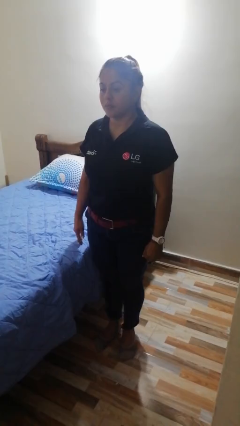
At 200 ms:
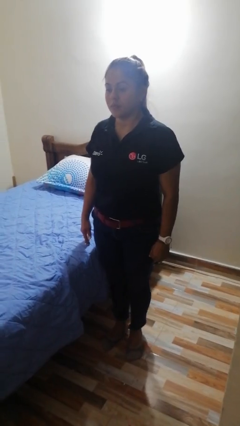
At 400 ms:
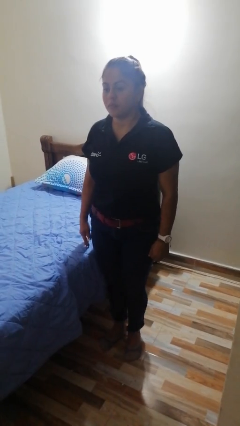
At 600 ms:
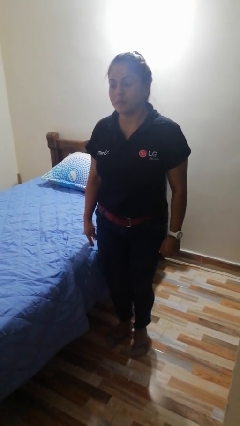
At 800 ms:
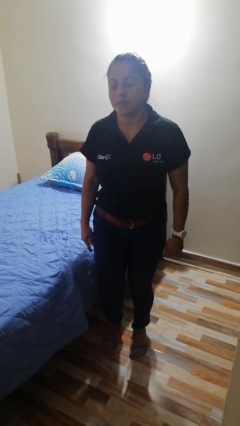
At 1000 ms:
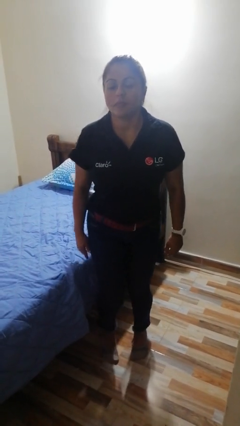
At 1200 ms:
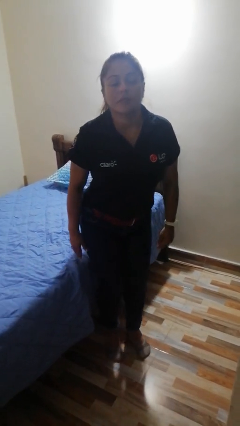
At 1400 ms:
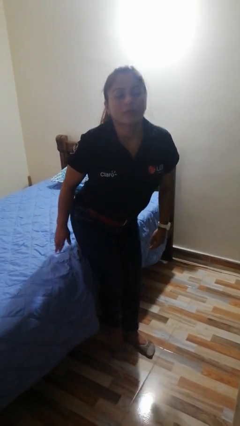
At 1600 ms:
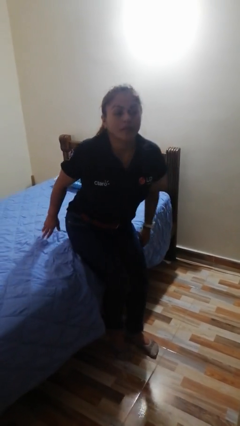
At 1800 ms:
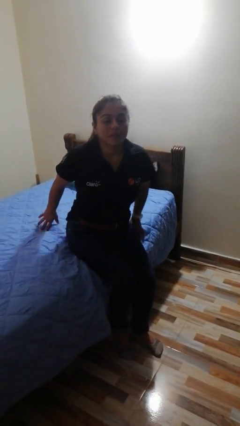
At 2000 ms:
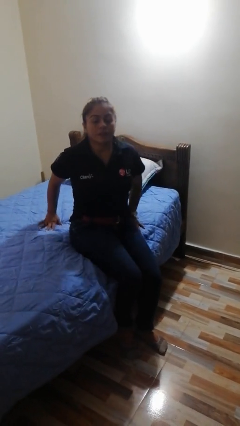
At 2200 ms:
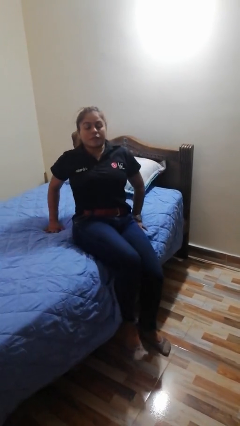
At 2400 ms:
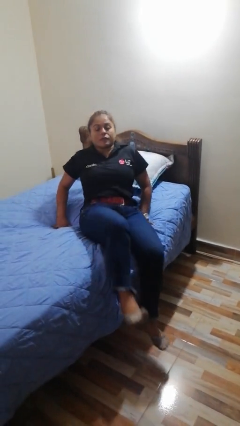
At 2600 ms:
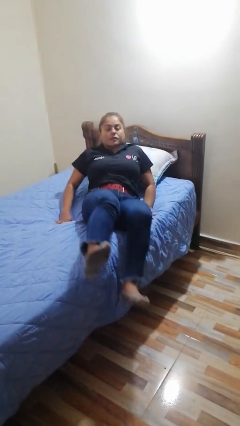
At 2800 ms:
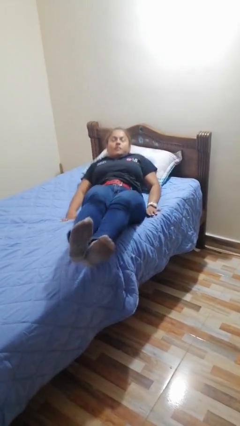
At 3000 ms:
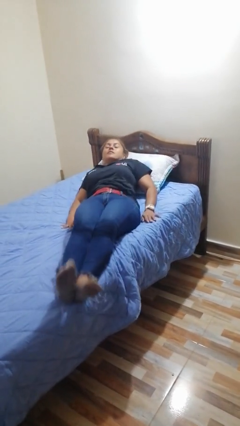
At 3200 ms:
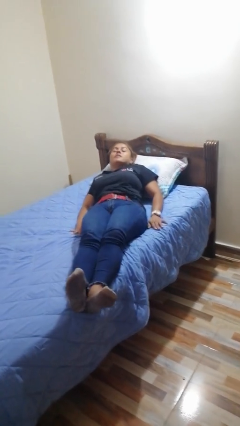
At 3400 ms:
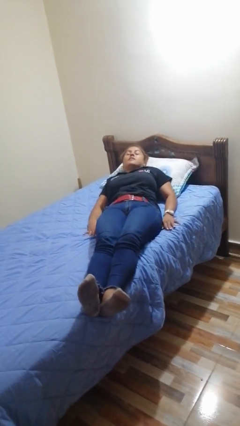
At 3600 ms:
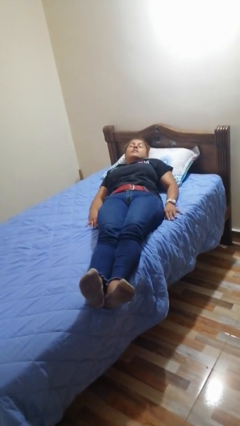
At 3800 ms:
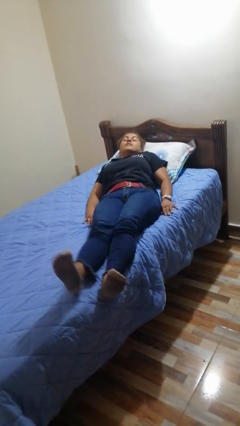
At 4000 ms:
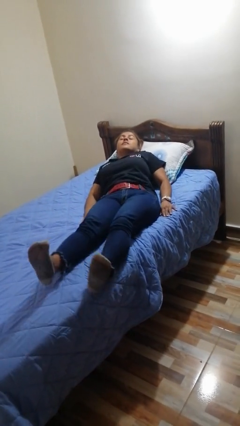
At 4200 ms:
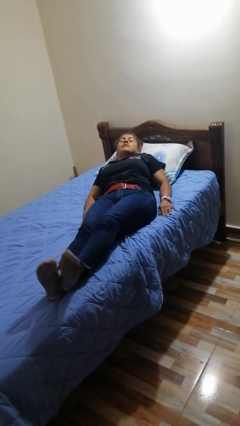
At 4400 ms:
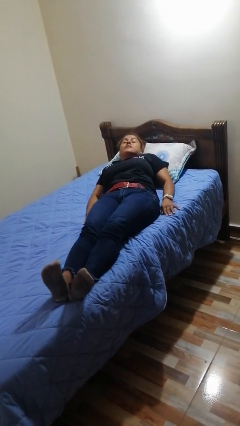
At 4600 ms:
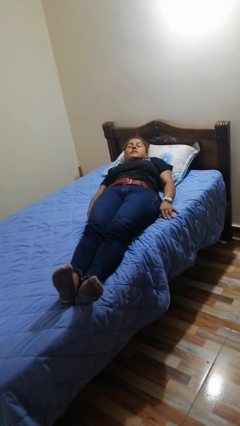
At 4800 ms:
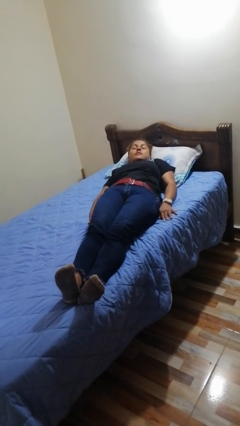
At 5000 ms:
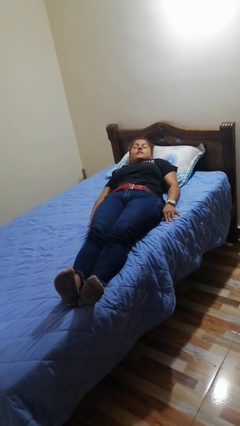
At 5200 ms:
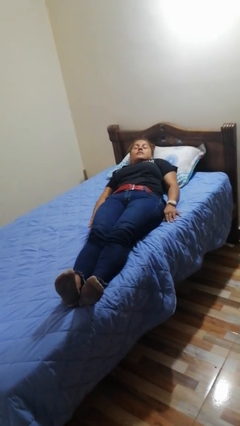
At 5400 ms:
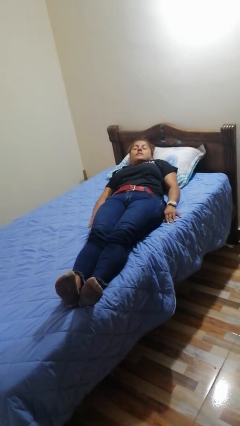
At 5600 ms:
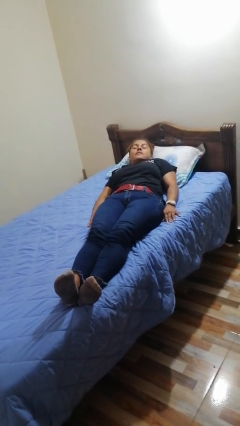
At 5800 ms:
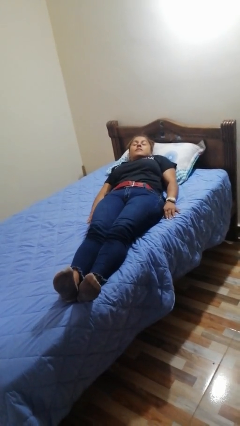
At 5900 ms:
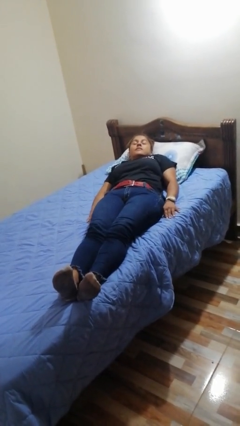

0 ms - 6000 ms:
person lies down on bed

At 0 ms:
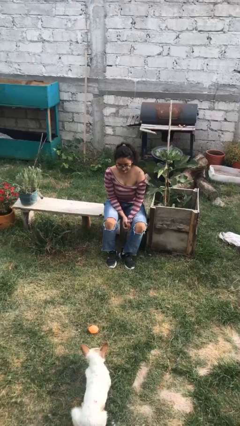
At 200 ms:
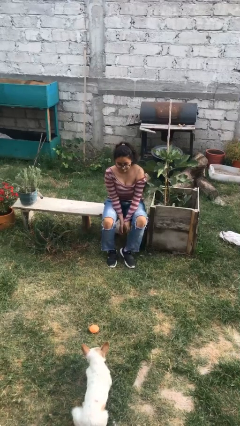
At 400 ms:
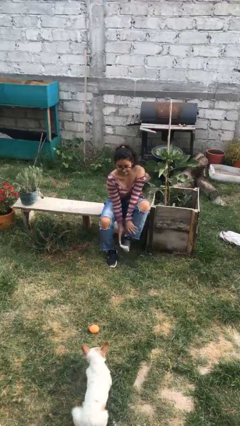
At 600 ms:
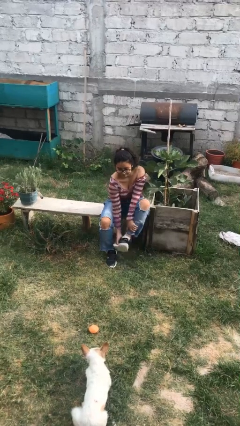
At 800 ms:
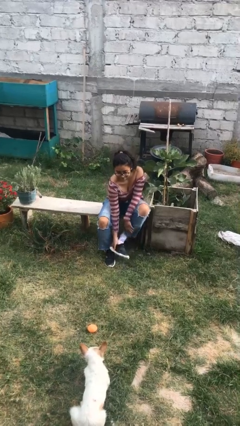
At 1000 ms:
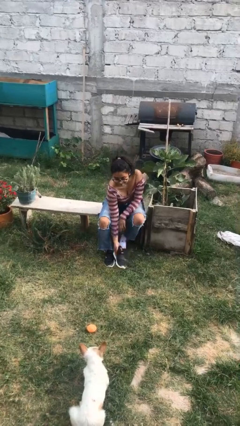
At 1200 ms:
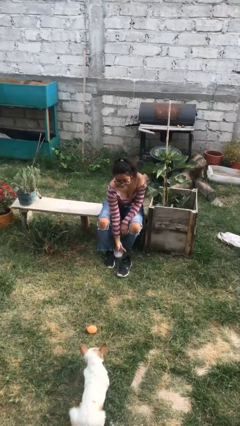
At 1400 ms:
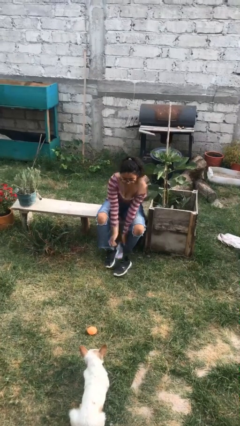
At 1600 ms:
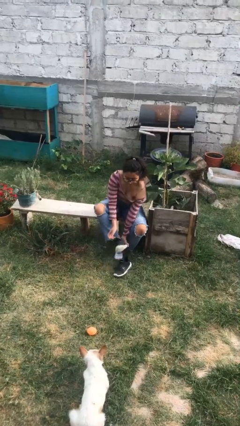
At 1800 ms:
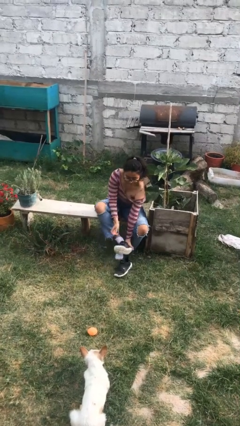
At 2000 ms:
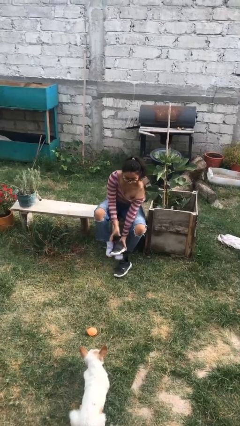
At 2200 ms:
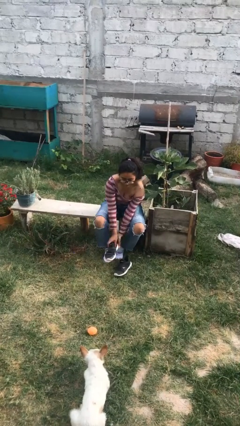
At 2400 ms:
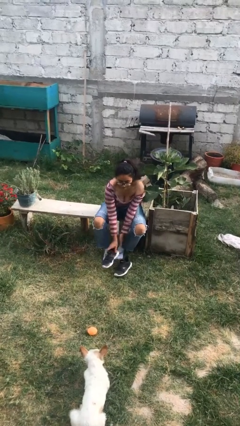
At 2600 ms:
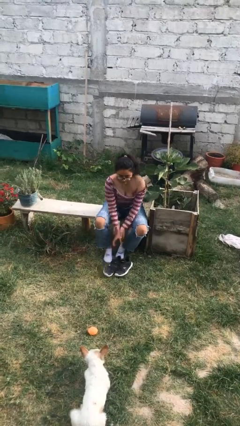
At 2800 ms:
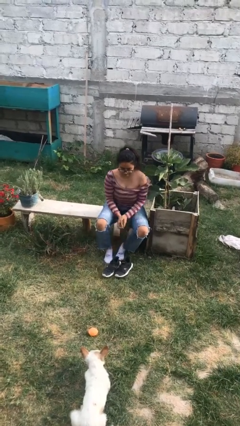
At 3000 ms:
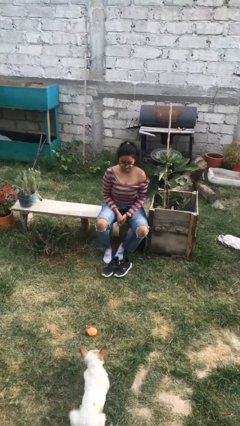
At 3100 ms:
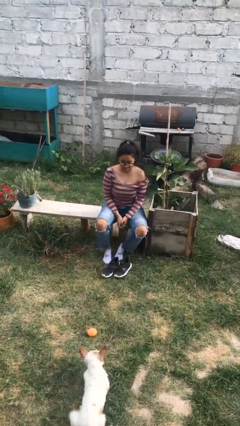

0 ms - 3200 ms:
person takes off shoes

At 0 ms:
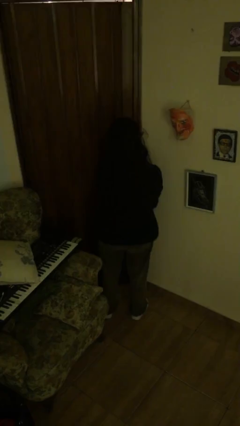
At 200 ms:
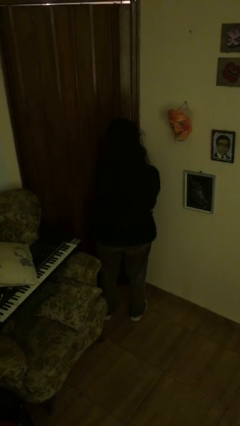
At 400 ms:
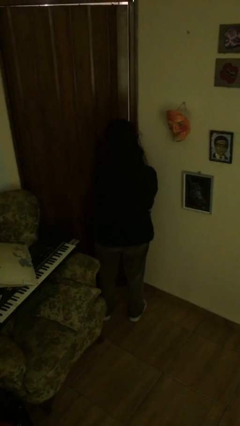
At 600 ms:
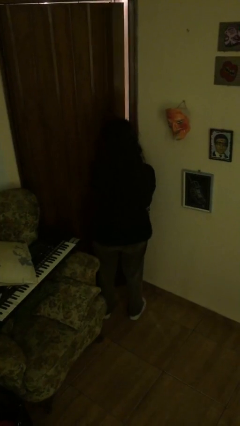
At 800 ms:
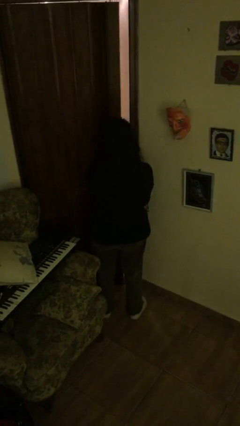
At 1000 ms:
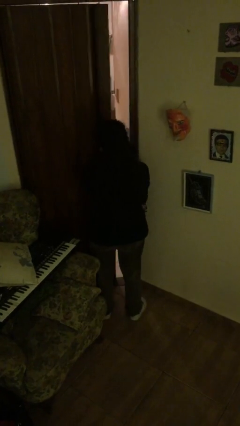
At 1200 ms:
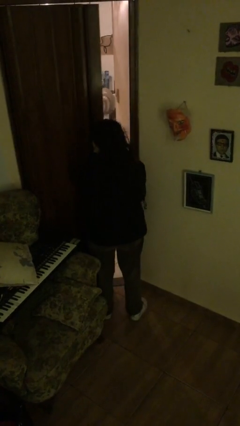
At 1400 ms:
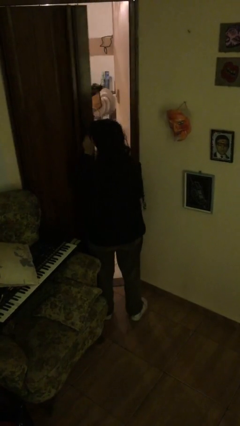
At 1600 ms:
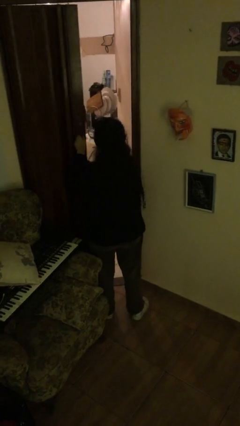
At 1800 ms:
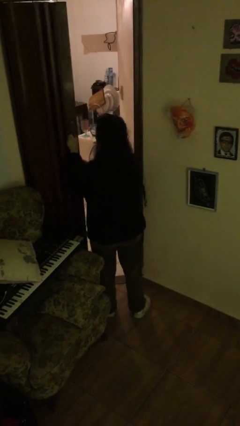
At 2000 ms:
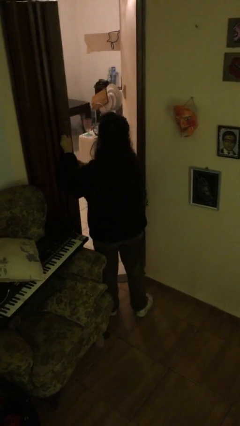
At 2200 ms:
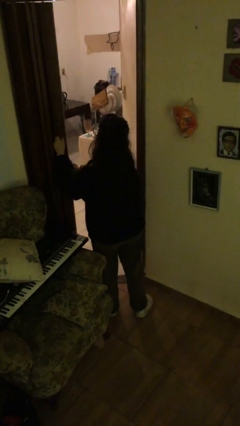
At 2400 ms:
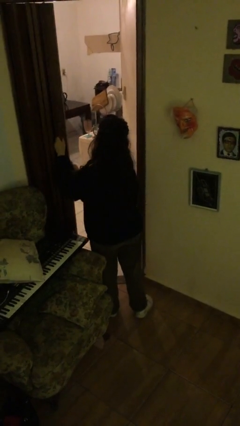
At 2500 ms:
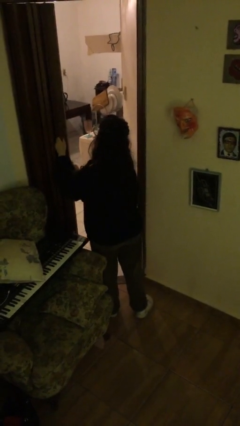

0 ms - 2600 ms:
person opens sliding door

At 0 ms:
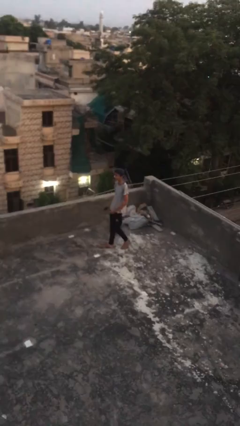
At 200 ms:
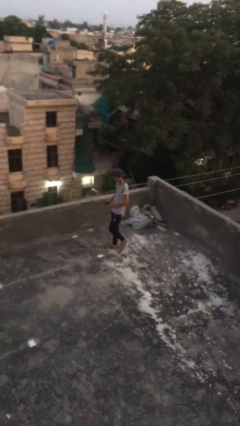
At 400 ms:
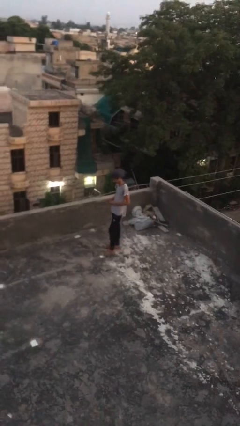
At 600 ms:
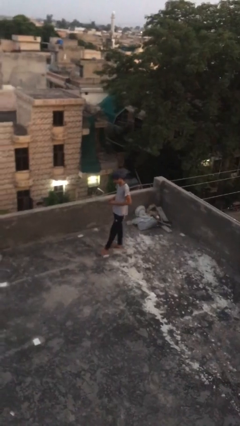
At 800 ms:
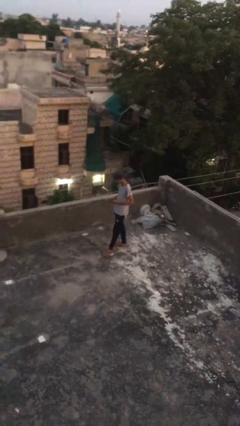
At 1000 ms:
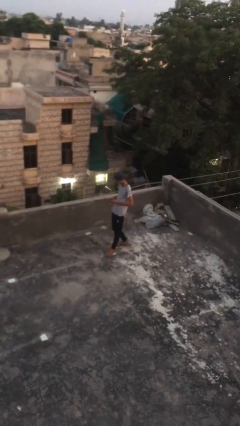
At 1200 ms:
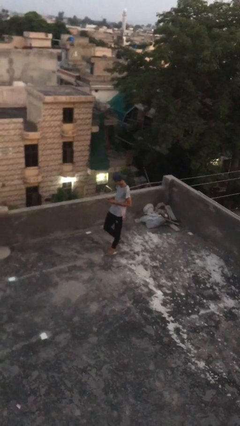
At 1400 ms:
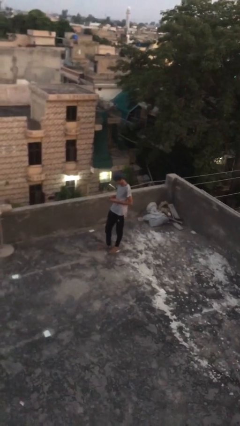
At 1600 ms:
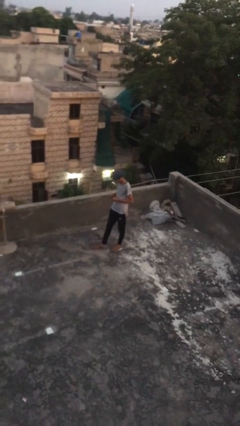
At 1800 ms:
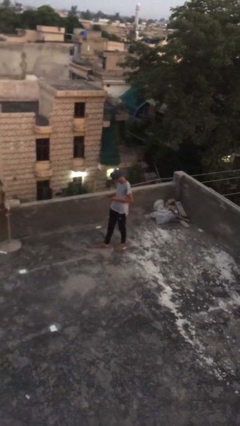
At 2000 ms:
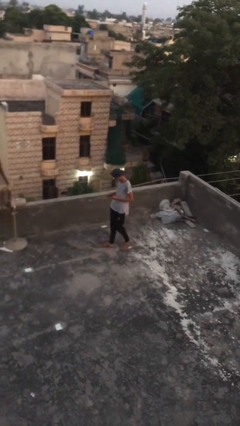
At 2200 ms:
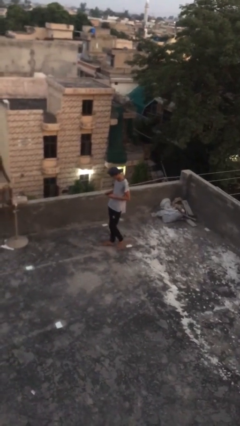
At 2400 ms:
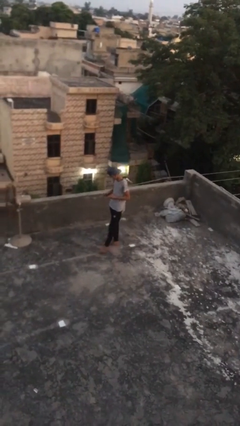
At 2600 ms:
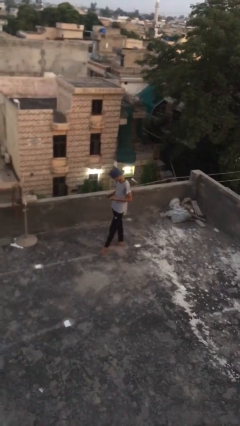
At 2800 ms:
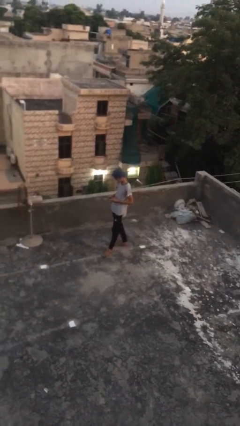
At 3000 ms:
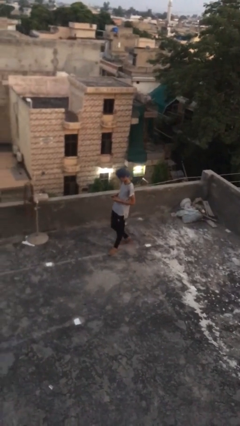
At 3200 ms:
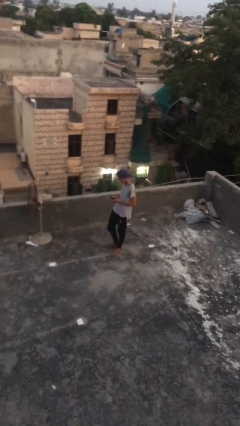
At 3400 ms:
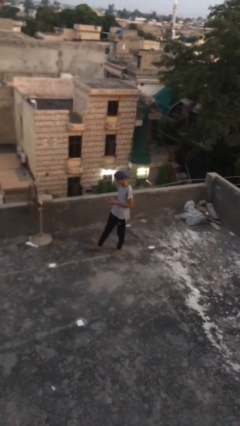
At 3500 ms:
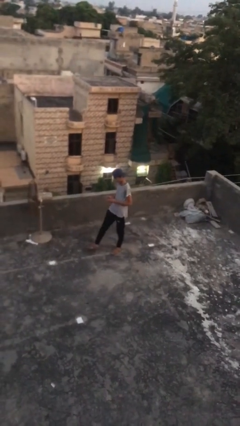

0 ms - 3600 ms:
person texts on phone

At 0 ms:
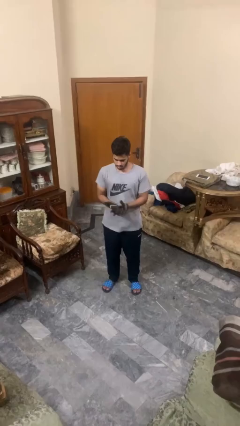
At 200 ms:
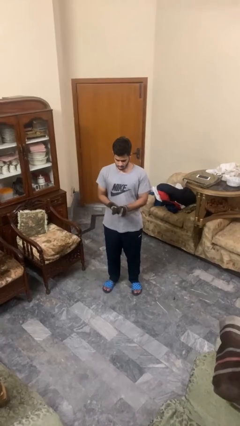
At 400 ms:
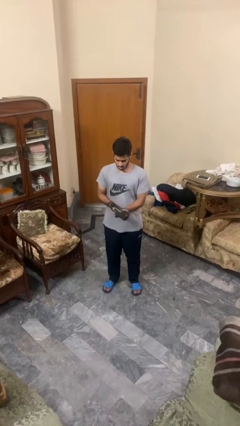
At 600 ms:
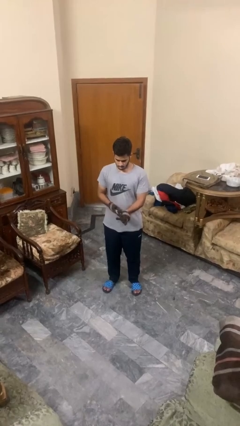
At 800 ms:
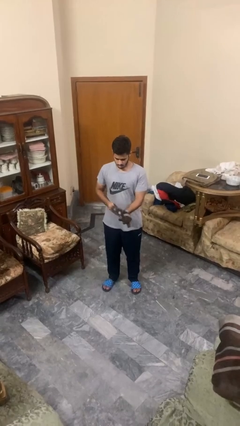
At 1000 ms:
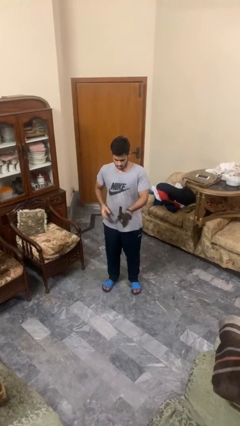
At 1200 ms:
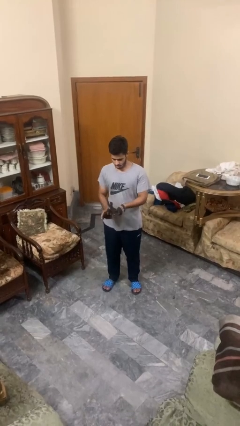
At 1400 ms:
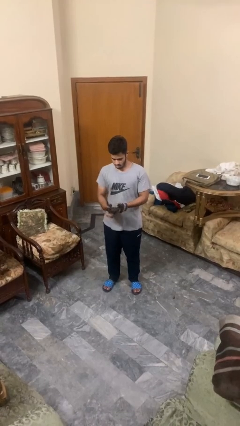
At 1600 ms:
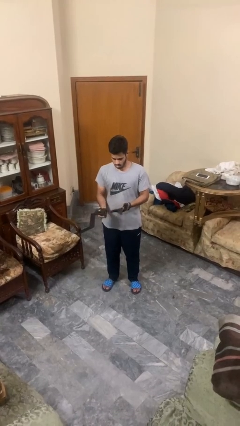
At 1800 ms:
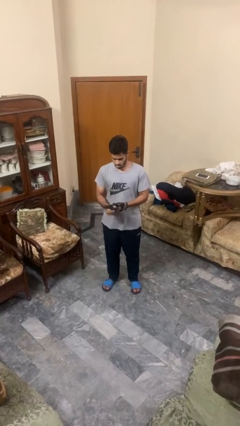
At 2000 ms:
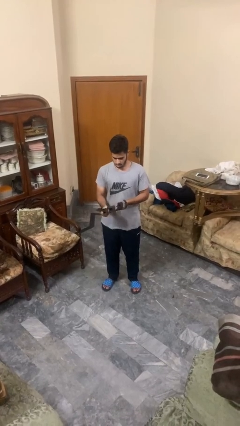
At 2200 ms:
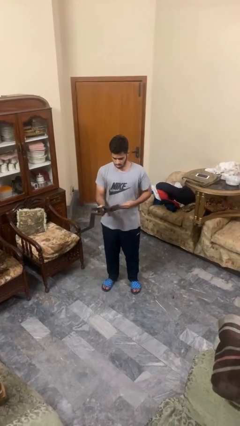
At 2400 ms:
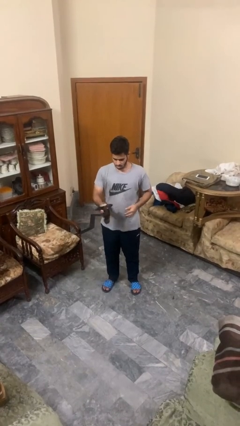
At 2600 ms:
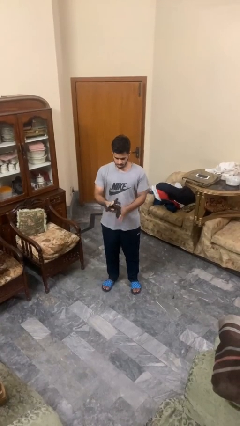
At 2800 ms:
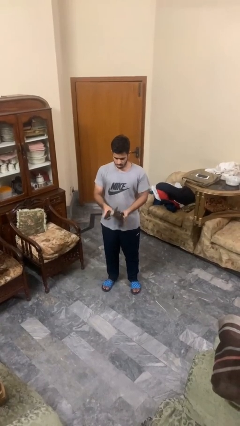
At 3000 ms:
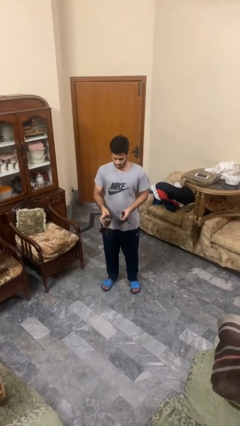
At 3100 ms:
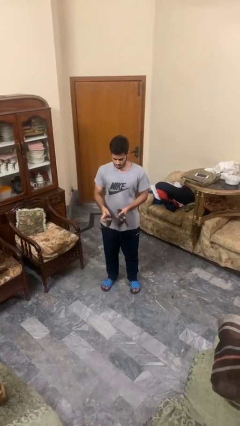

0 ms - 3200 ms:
person takes off gloves